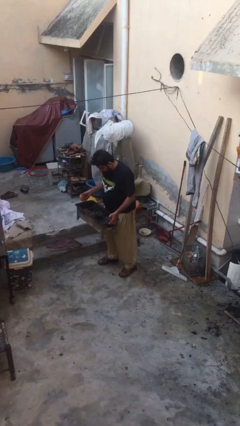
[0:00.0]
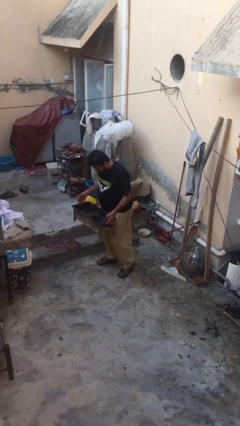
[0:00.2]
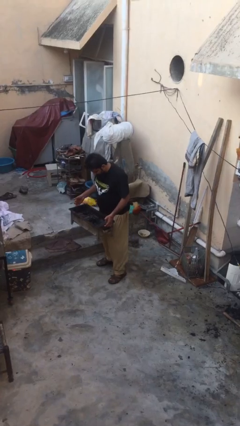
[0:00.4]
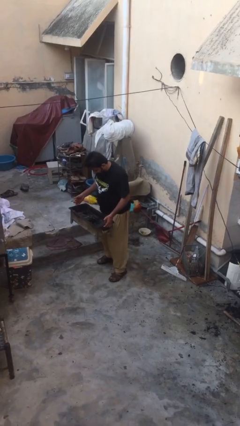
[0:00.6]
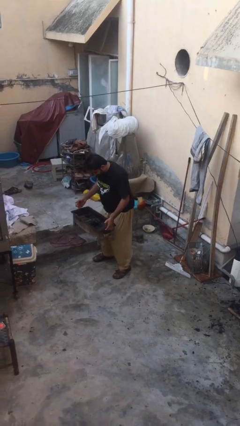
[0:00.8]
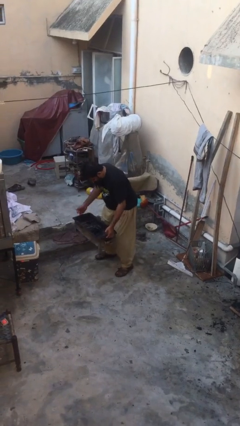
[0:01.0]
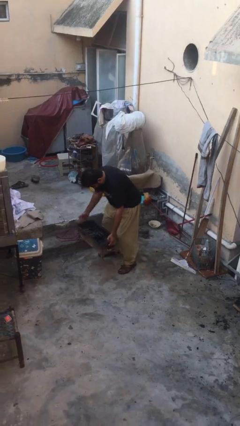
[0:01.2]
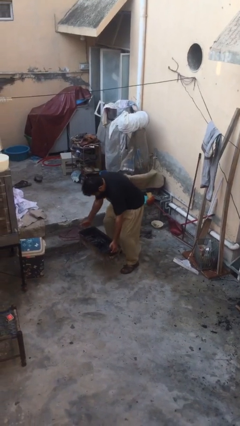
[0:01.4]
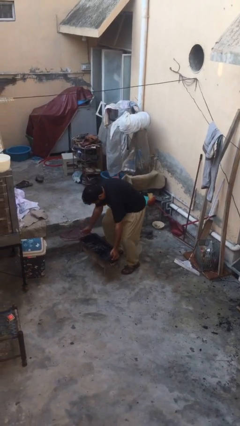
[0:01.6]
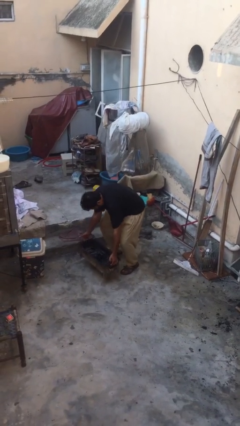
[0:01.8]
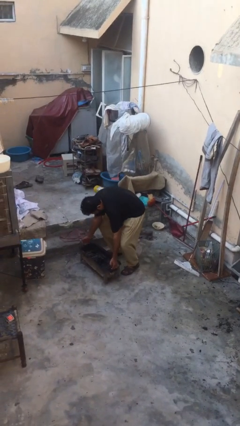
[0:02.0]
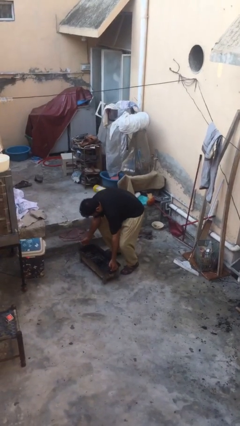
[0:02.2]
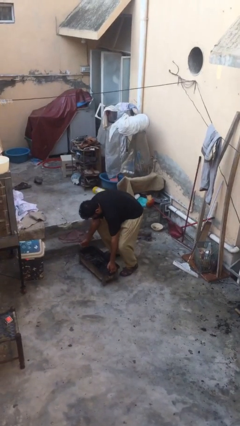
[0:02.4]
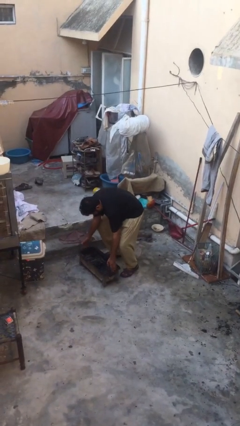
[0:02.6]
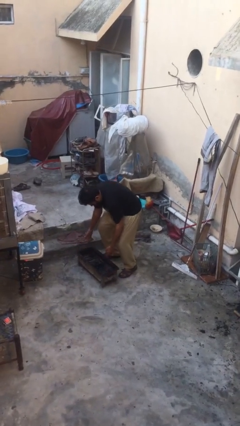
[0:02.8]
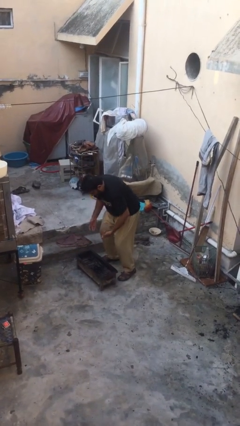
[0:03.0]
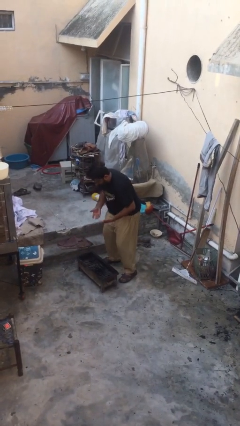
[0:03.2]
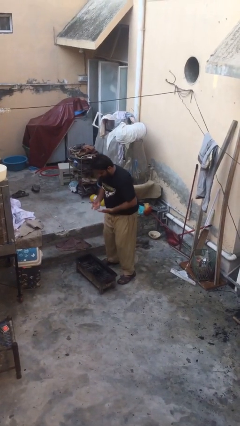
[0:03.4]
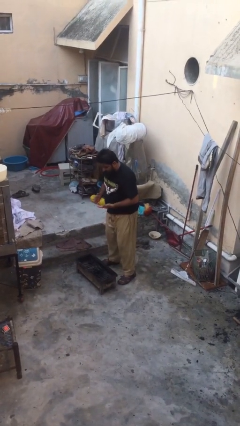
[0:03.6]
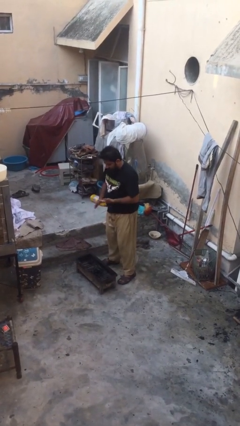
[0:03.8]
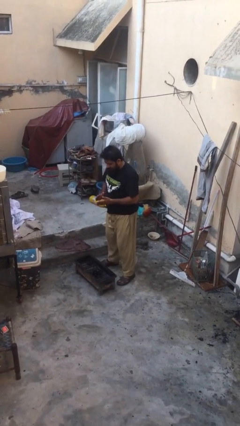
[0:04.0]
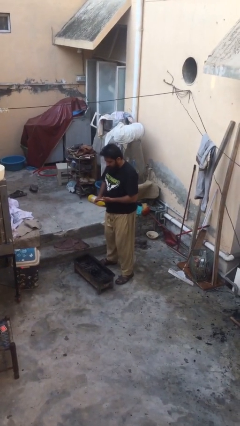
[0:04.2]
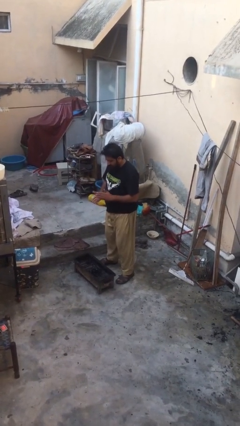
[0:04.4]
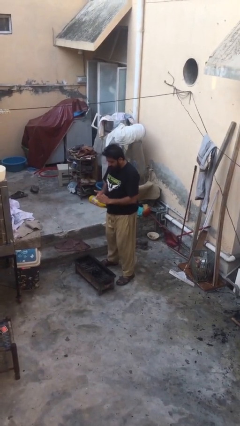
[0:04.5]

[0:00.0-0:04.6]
person puts down object on floor

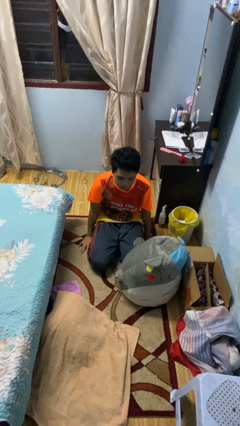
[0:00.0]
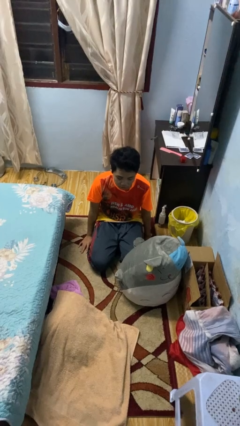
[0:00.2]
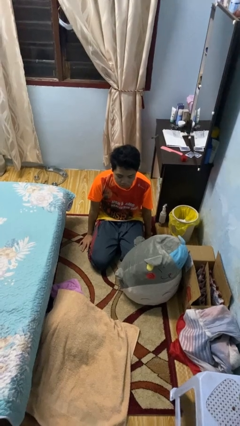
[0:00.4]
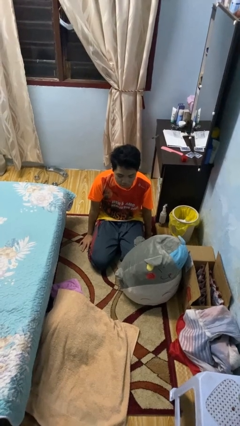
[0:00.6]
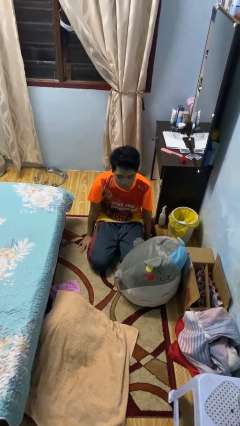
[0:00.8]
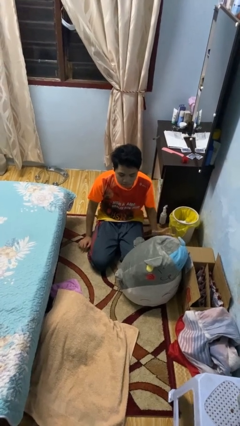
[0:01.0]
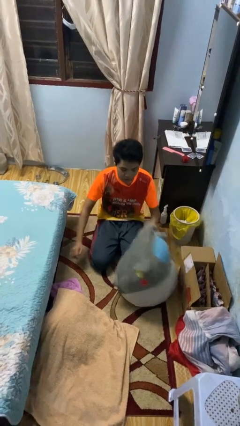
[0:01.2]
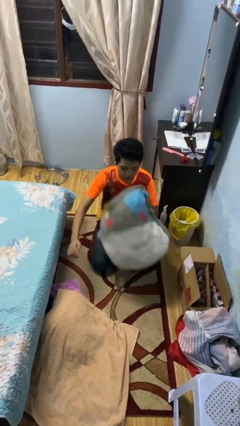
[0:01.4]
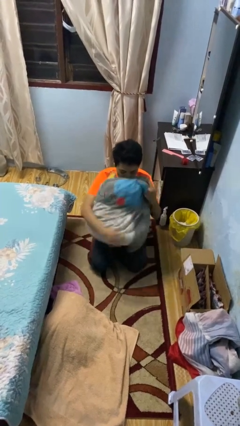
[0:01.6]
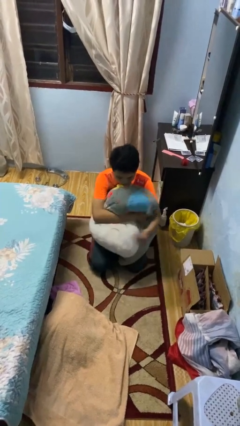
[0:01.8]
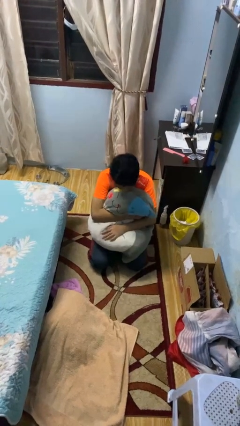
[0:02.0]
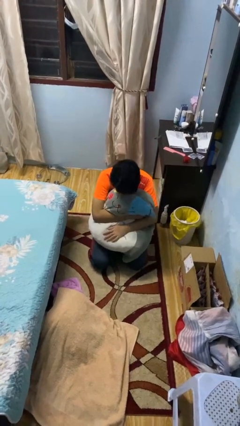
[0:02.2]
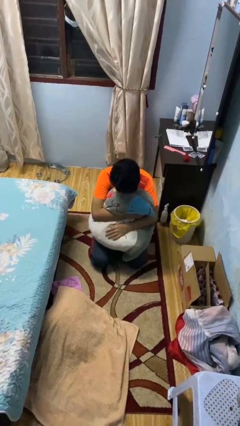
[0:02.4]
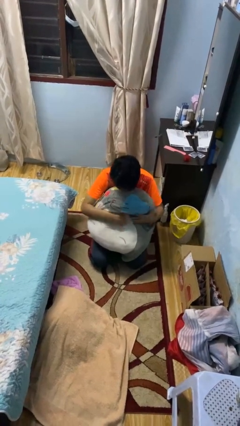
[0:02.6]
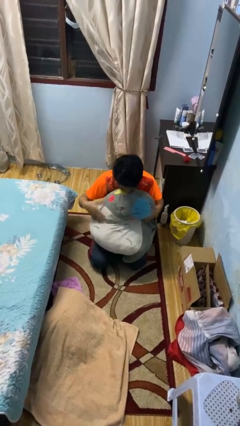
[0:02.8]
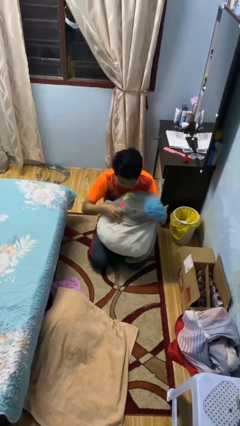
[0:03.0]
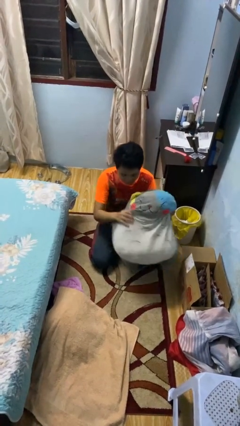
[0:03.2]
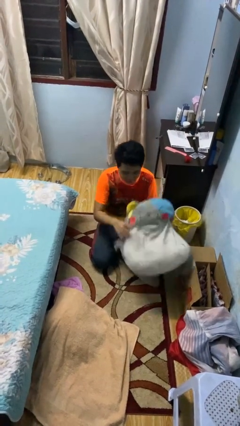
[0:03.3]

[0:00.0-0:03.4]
person hugs stuffed animal

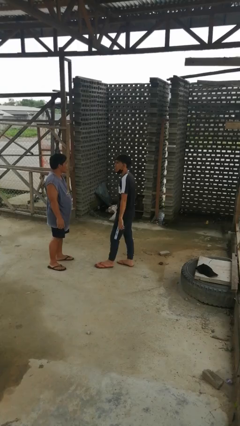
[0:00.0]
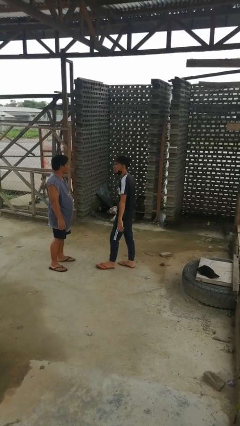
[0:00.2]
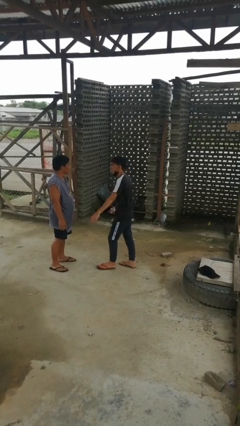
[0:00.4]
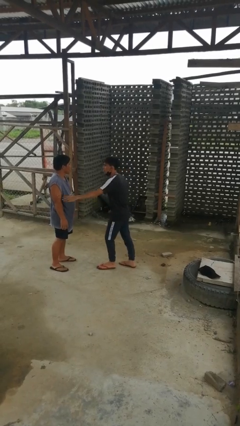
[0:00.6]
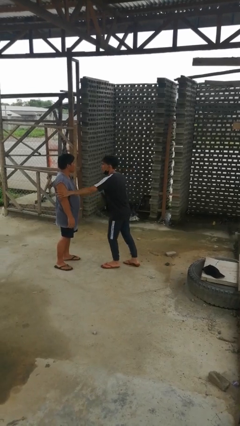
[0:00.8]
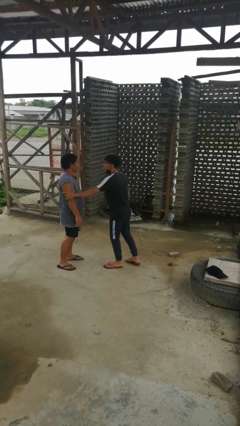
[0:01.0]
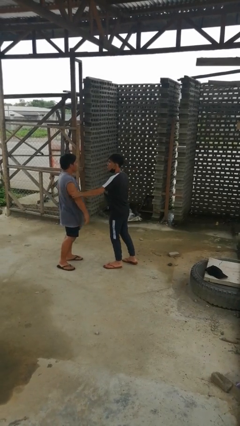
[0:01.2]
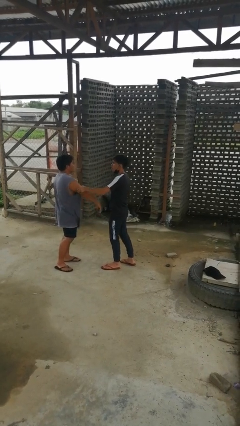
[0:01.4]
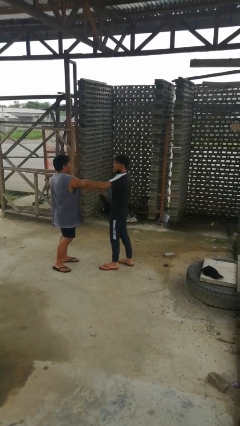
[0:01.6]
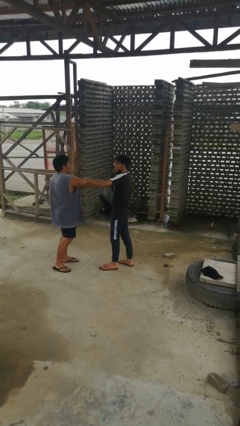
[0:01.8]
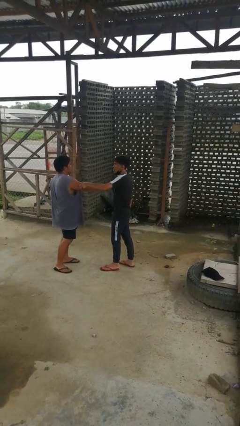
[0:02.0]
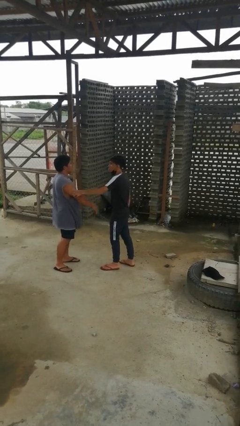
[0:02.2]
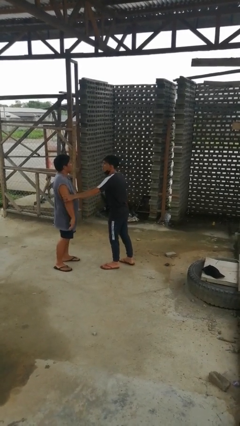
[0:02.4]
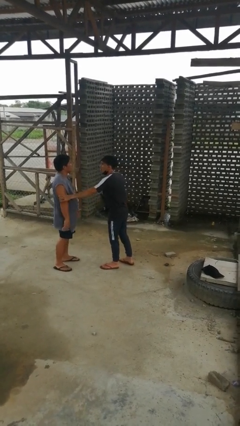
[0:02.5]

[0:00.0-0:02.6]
person grabs person by bicep

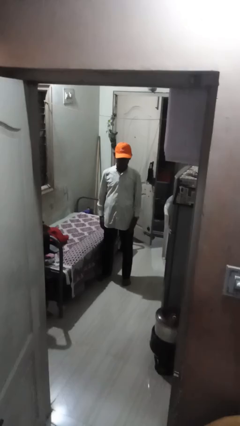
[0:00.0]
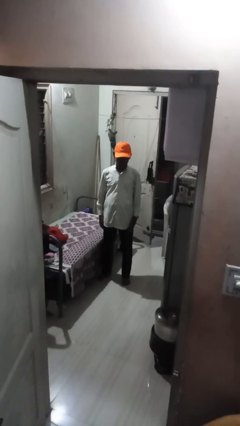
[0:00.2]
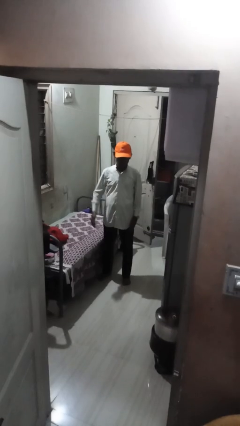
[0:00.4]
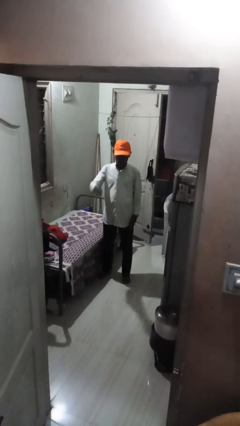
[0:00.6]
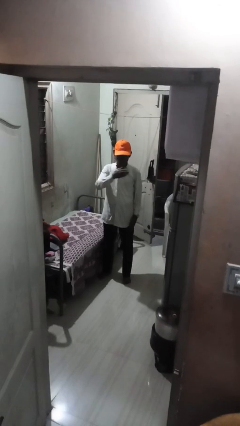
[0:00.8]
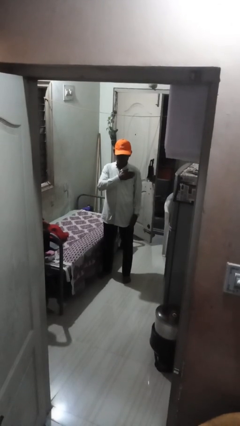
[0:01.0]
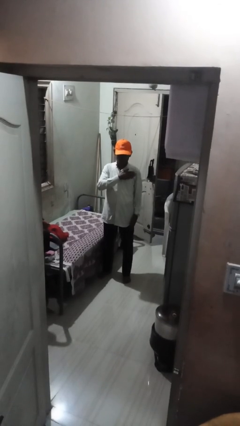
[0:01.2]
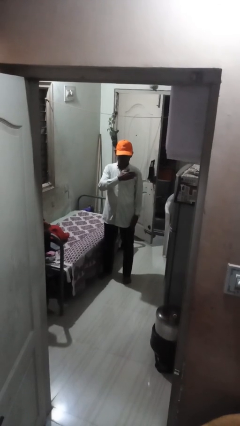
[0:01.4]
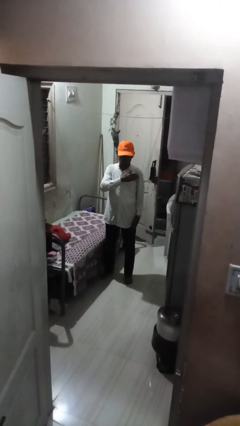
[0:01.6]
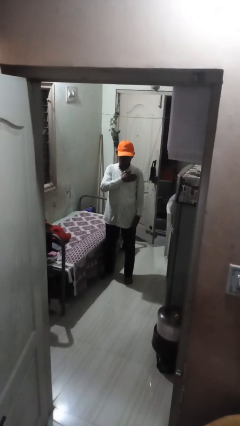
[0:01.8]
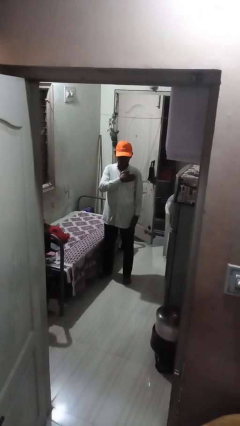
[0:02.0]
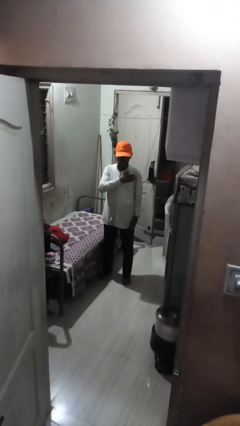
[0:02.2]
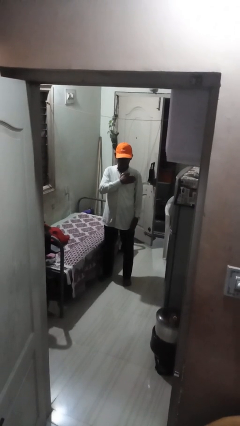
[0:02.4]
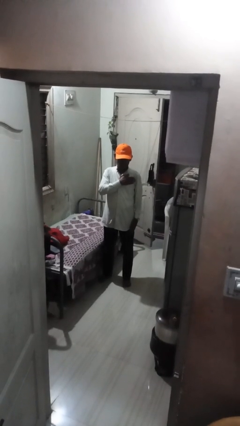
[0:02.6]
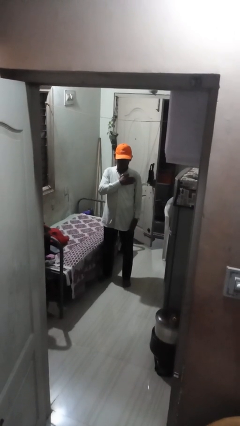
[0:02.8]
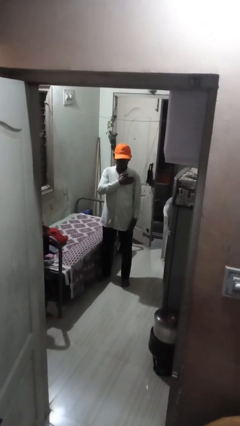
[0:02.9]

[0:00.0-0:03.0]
person drums on chest

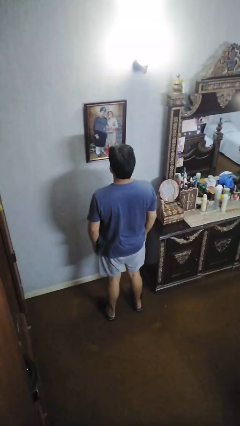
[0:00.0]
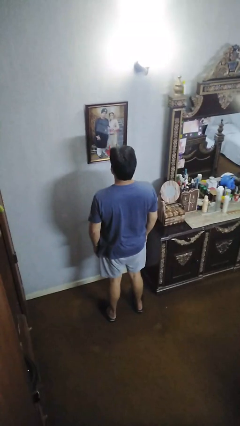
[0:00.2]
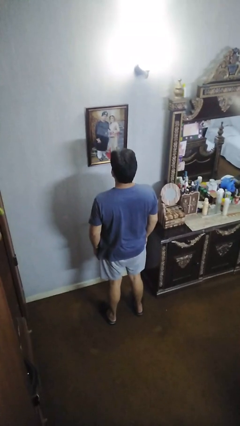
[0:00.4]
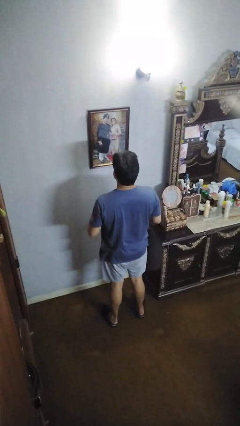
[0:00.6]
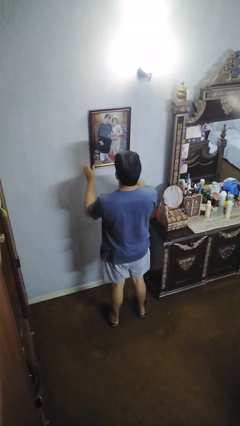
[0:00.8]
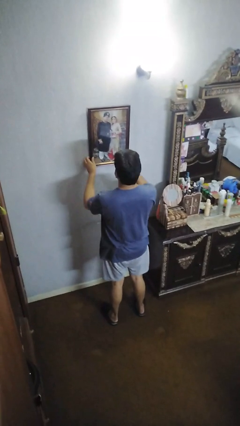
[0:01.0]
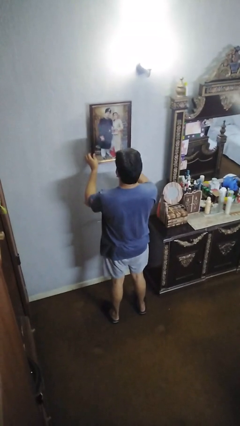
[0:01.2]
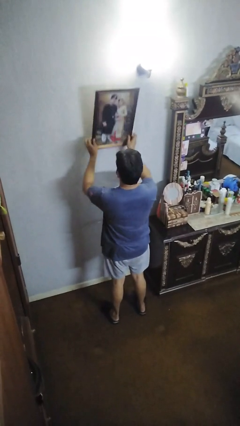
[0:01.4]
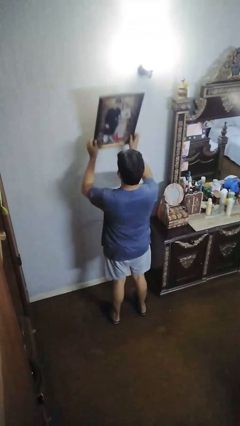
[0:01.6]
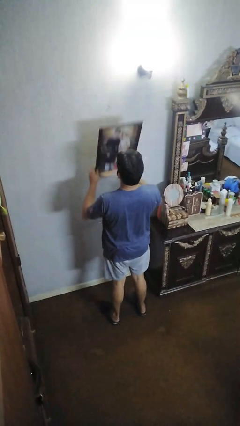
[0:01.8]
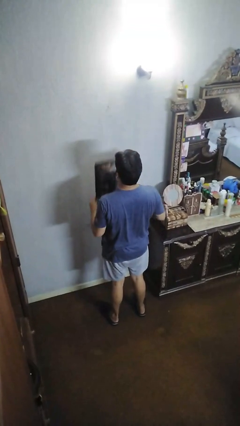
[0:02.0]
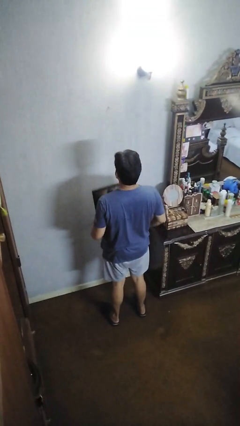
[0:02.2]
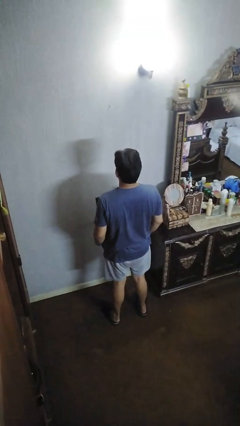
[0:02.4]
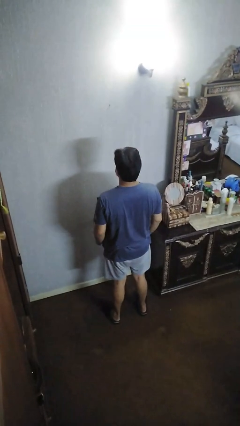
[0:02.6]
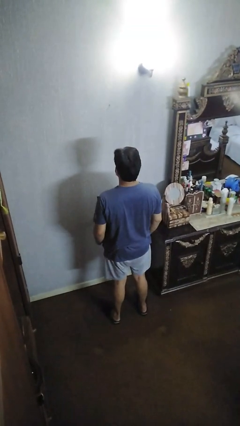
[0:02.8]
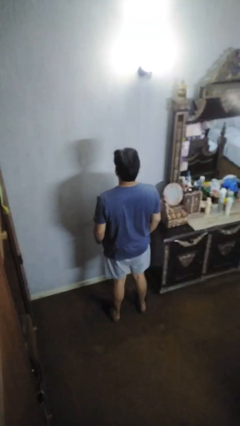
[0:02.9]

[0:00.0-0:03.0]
person takes down picture frame

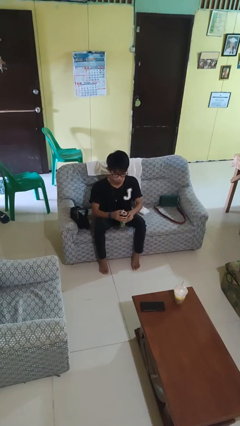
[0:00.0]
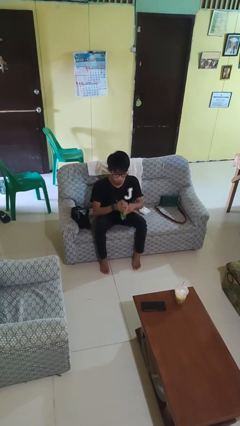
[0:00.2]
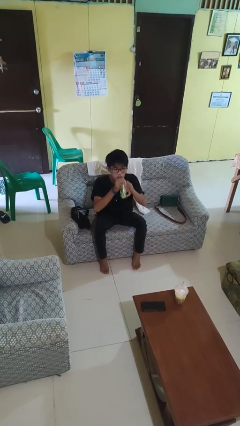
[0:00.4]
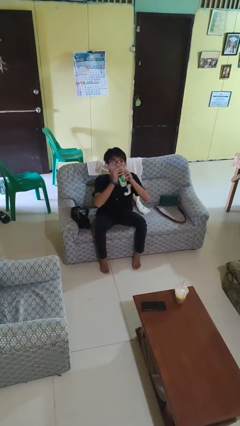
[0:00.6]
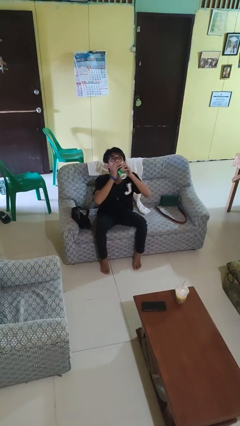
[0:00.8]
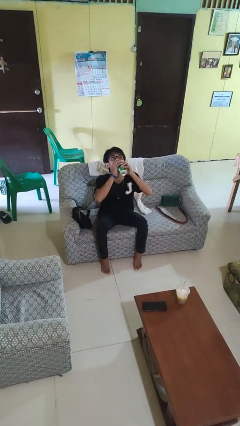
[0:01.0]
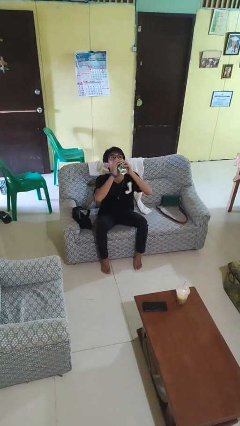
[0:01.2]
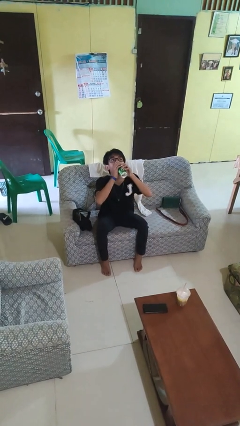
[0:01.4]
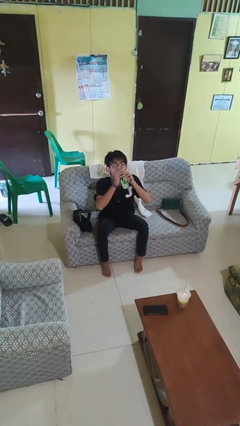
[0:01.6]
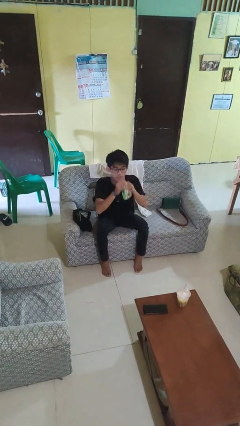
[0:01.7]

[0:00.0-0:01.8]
person drinks from beverage can
